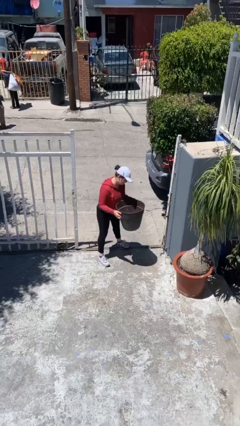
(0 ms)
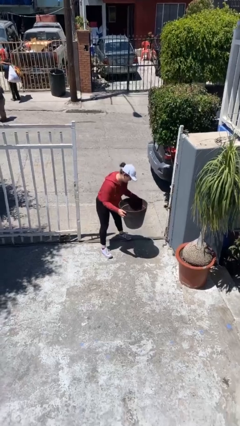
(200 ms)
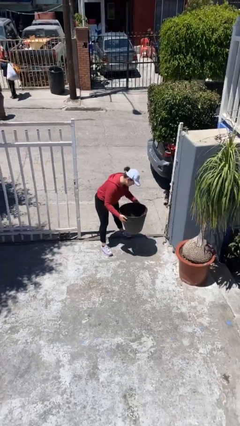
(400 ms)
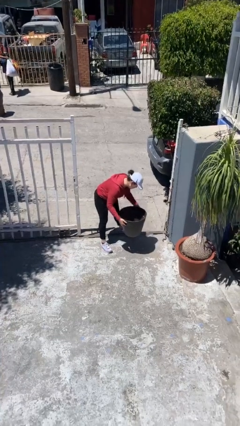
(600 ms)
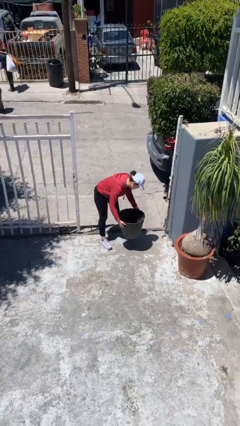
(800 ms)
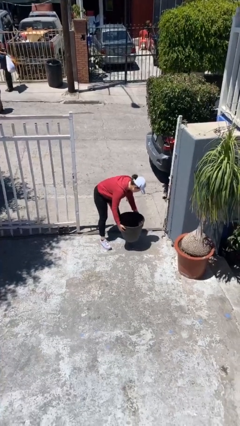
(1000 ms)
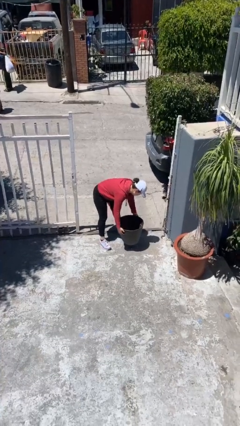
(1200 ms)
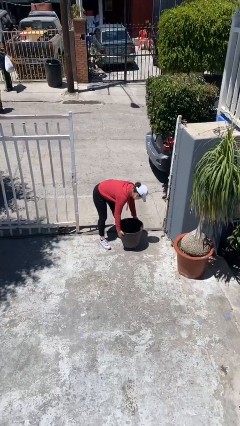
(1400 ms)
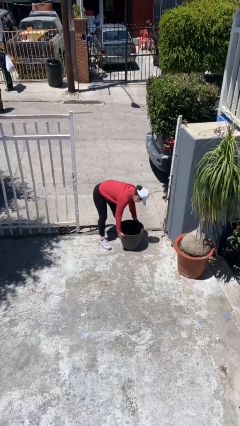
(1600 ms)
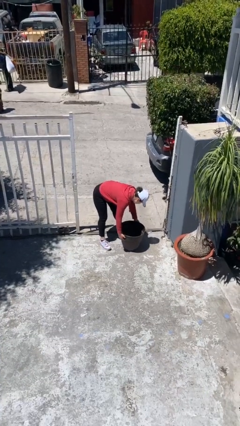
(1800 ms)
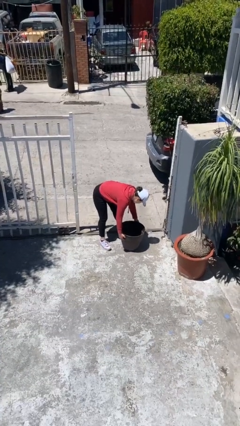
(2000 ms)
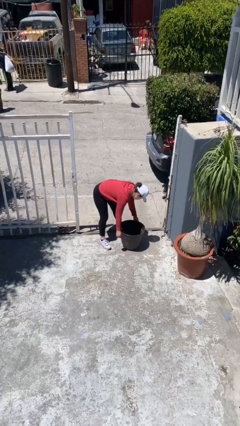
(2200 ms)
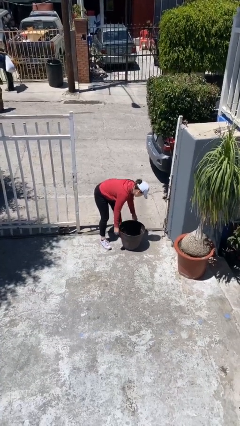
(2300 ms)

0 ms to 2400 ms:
person puts down object on floor

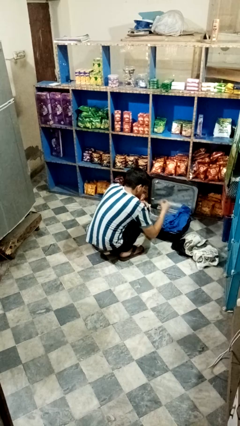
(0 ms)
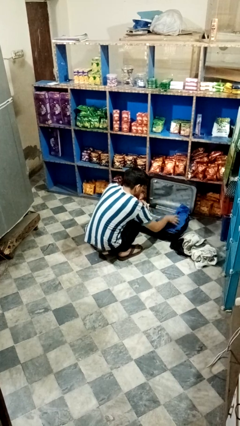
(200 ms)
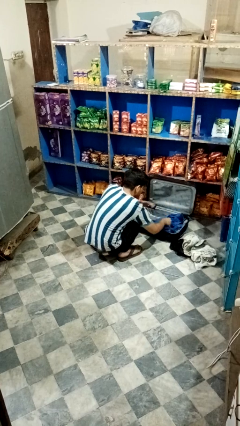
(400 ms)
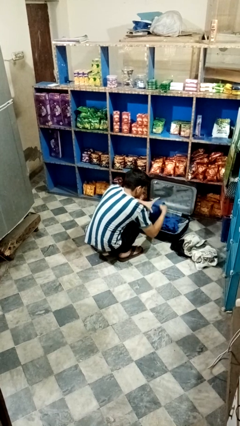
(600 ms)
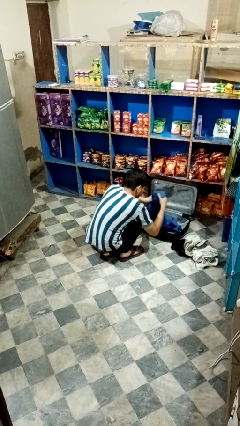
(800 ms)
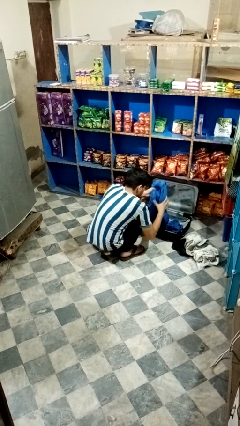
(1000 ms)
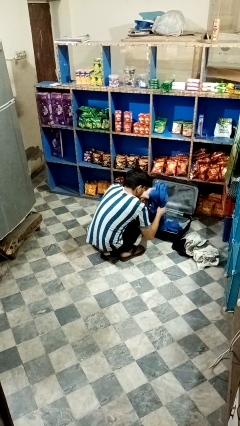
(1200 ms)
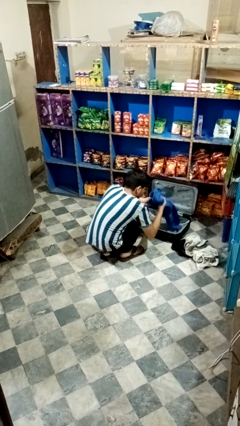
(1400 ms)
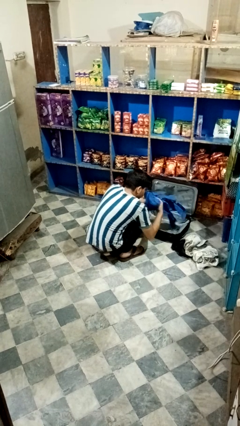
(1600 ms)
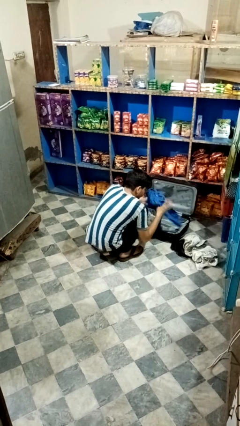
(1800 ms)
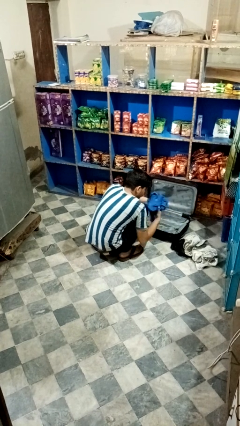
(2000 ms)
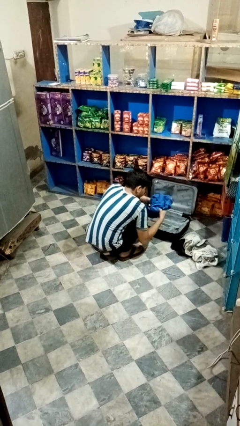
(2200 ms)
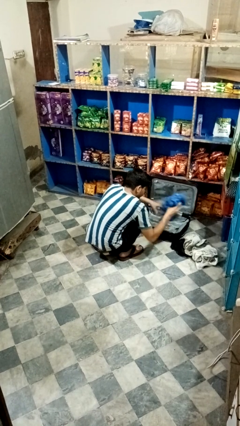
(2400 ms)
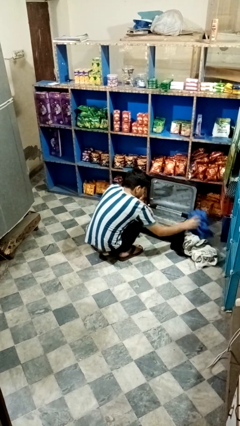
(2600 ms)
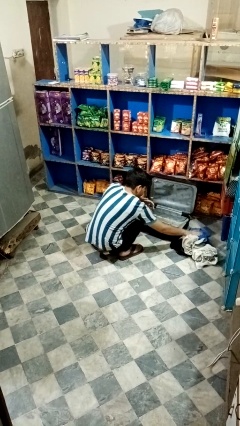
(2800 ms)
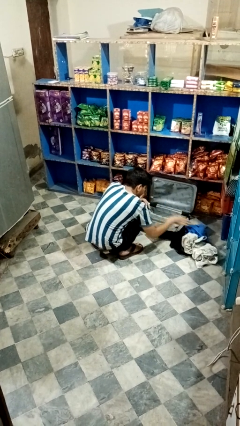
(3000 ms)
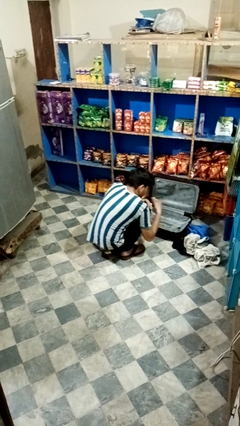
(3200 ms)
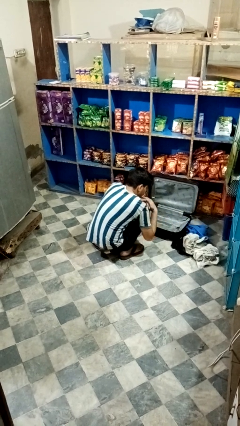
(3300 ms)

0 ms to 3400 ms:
person unloads clothes from suitcase

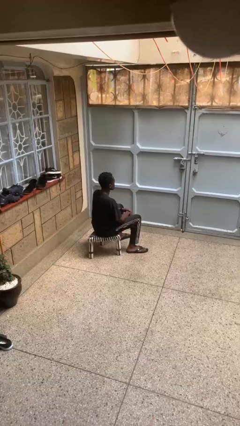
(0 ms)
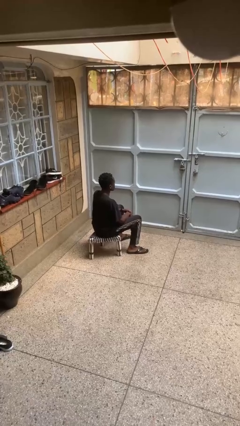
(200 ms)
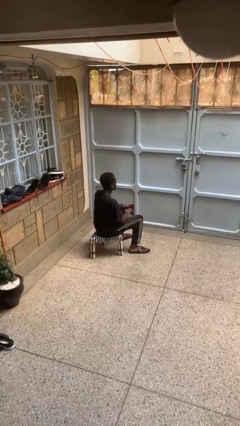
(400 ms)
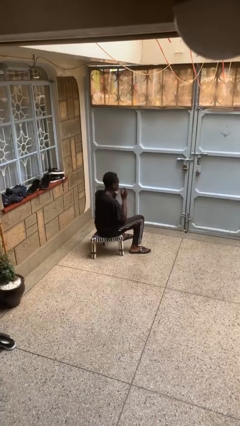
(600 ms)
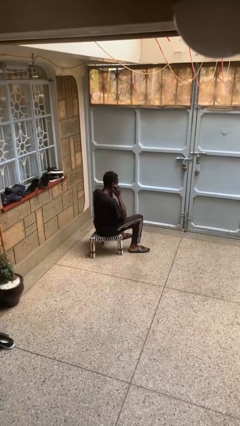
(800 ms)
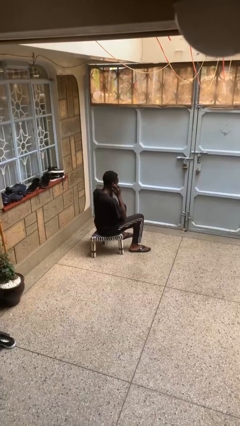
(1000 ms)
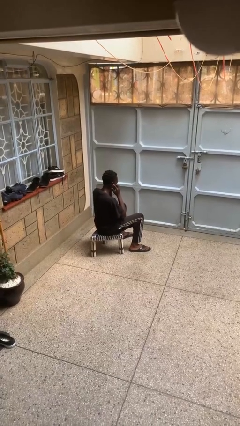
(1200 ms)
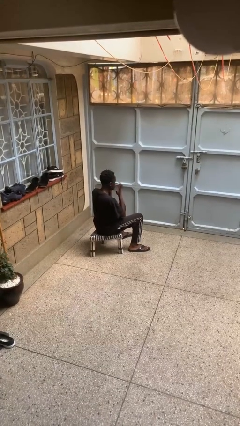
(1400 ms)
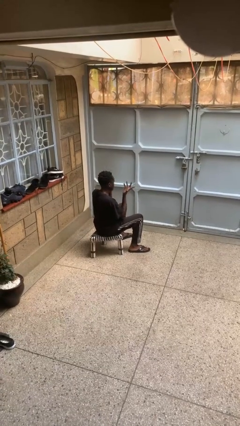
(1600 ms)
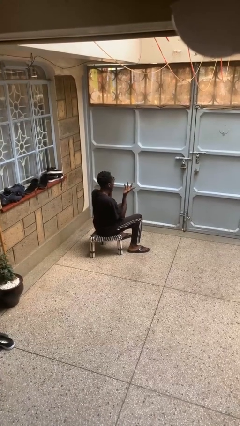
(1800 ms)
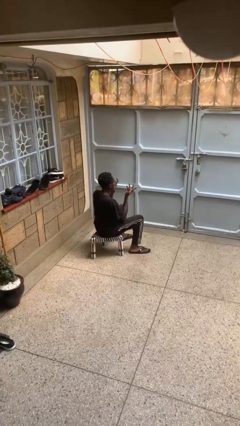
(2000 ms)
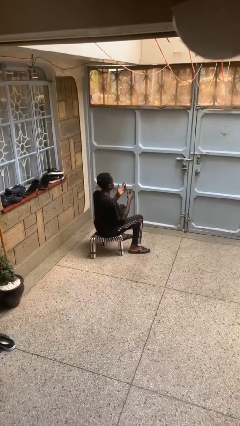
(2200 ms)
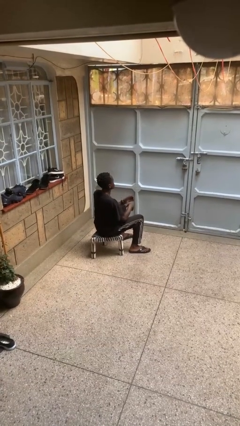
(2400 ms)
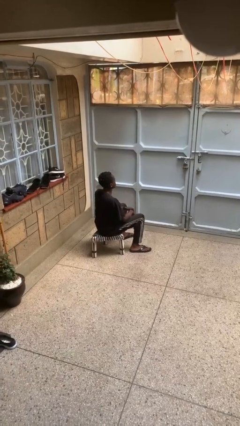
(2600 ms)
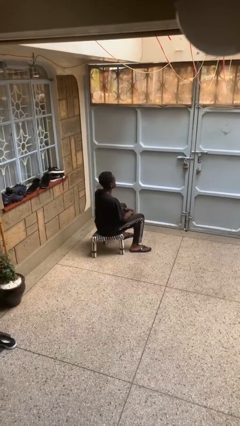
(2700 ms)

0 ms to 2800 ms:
person puts fingers in ear

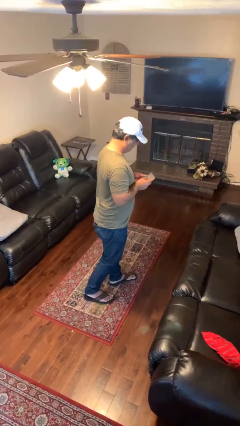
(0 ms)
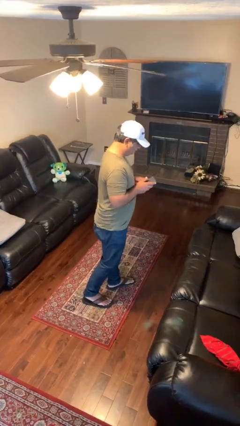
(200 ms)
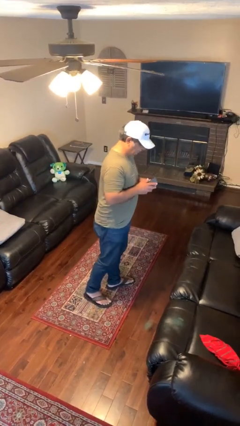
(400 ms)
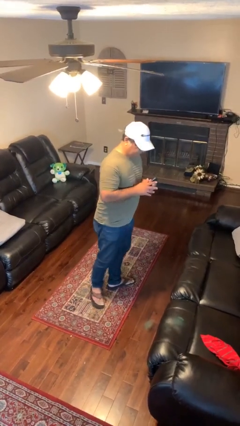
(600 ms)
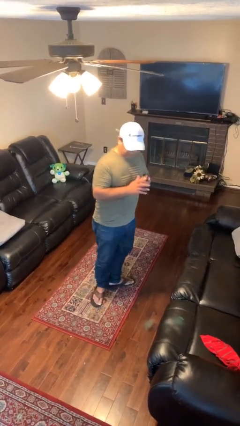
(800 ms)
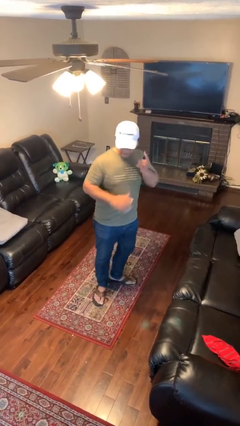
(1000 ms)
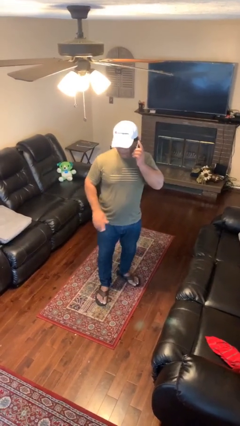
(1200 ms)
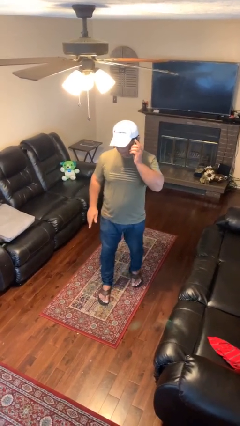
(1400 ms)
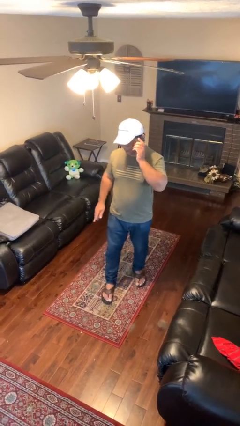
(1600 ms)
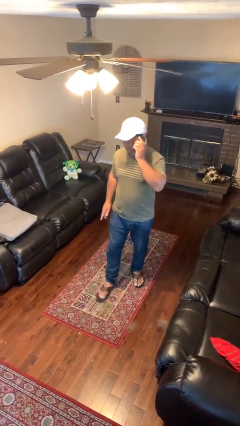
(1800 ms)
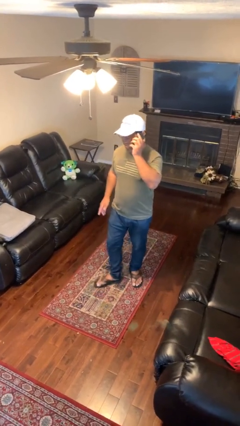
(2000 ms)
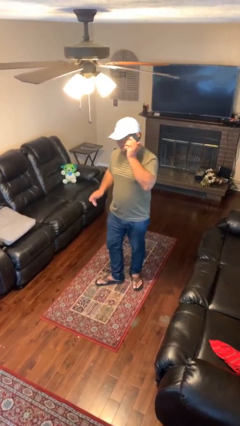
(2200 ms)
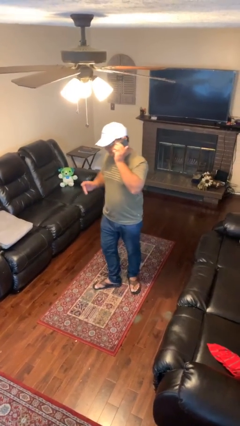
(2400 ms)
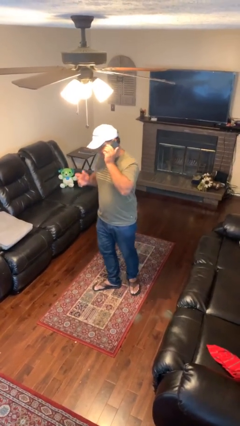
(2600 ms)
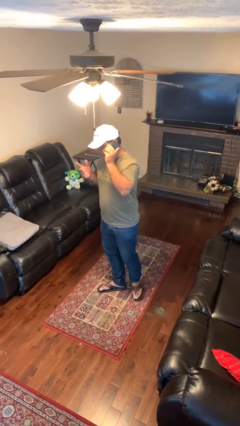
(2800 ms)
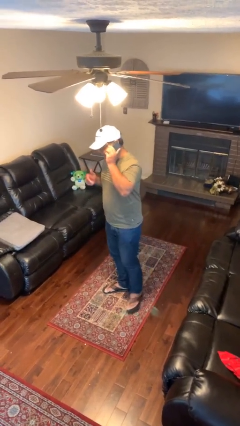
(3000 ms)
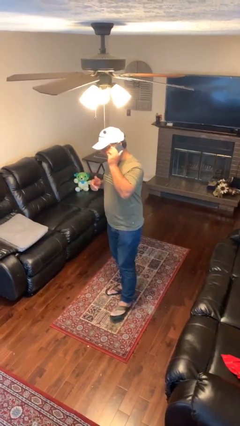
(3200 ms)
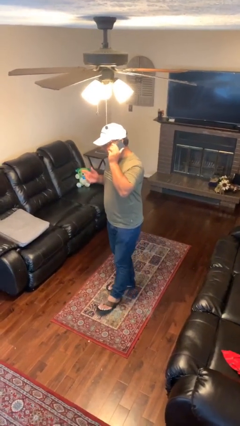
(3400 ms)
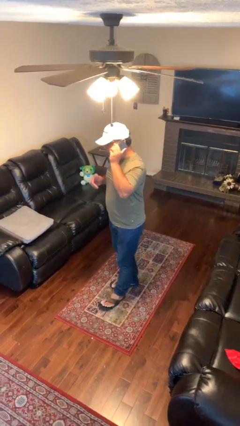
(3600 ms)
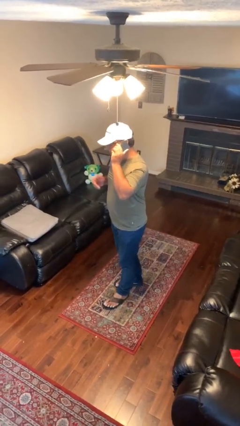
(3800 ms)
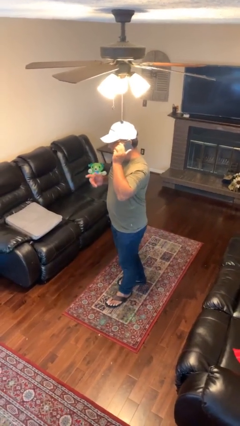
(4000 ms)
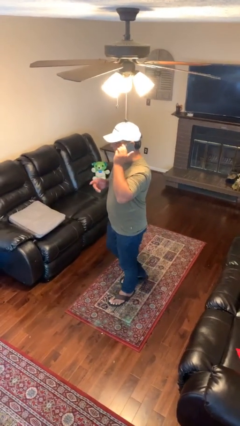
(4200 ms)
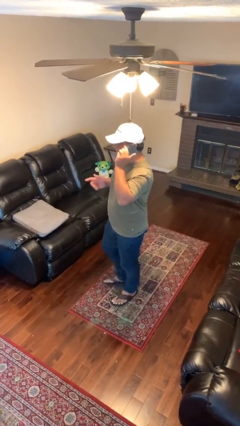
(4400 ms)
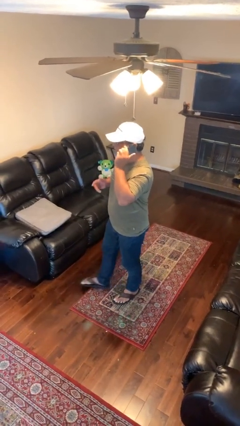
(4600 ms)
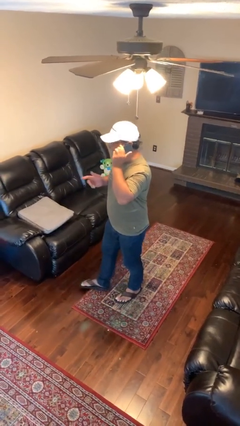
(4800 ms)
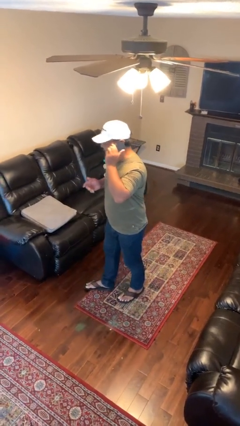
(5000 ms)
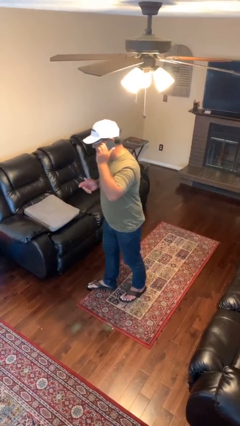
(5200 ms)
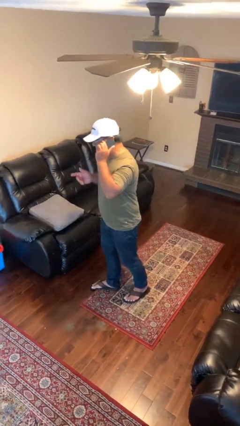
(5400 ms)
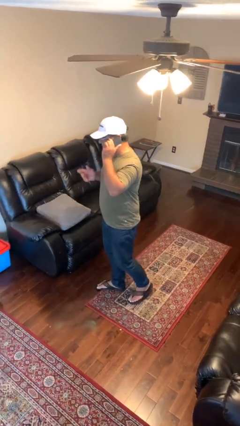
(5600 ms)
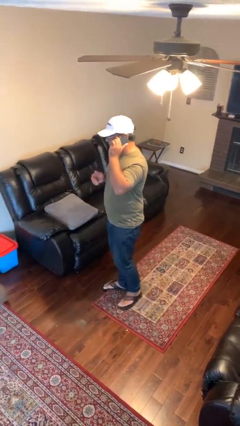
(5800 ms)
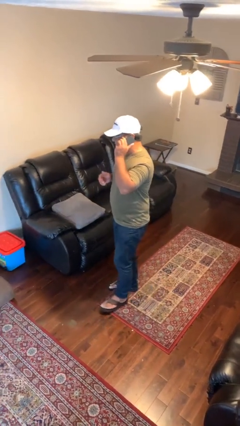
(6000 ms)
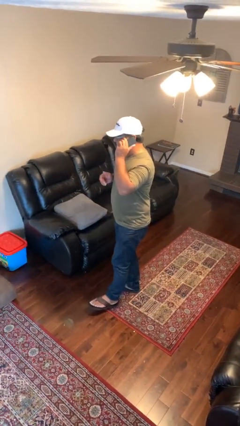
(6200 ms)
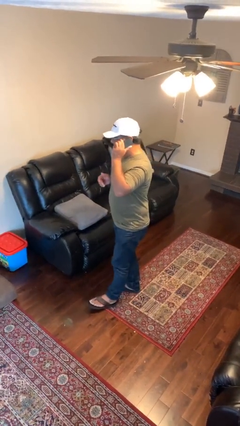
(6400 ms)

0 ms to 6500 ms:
person talks on phone

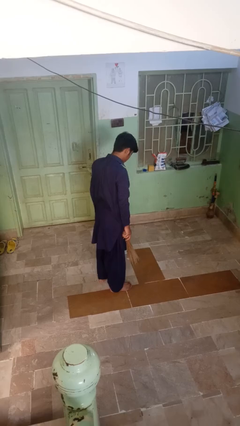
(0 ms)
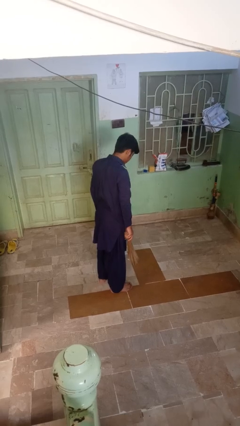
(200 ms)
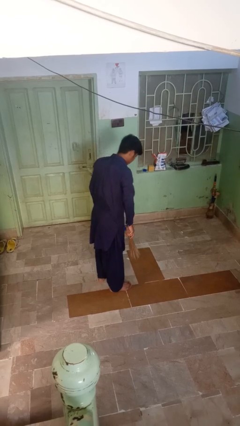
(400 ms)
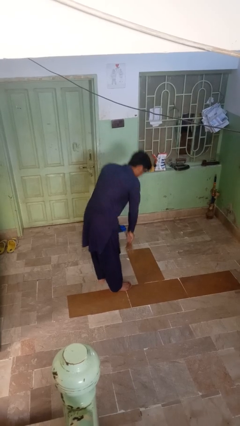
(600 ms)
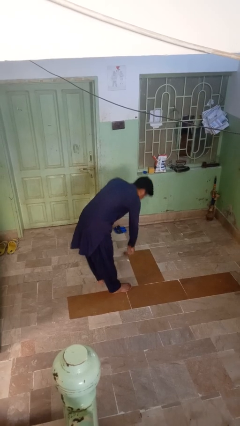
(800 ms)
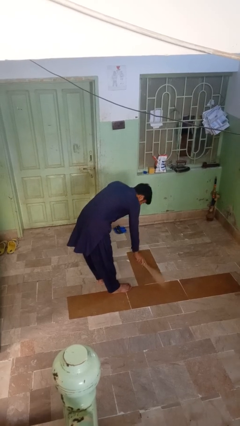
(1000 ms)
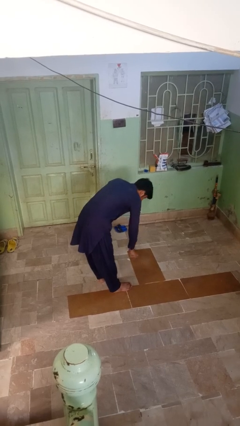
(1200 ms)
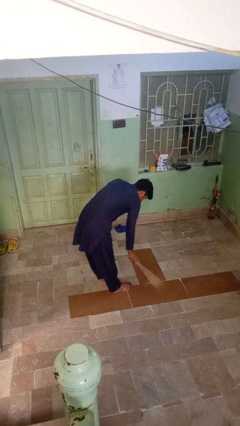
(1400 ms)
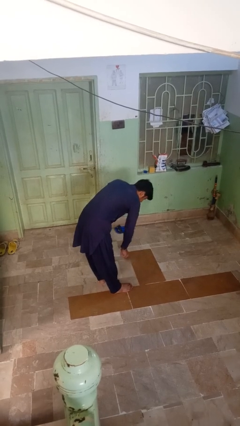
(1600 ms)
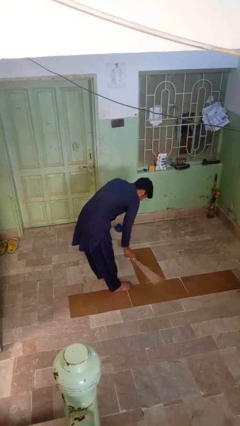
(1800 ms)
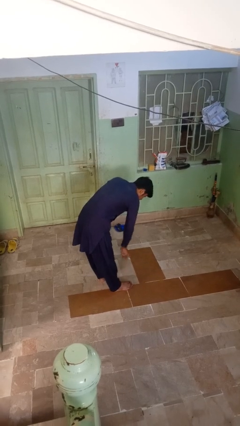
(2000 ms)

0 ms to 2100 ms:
person sweeps floor

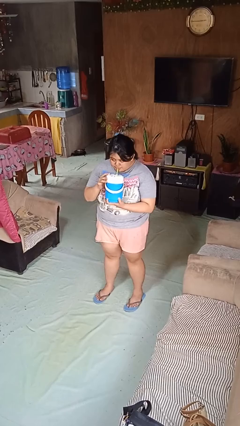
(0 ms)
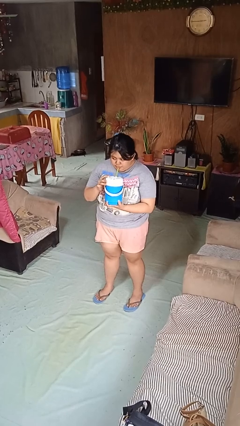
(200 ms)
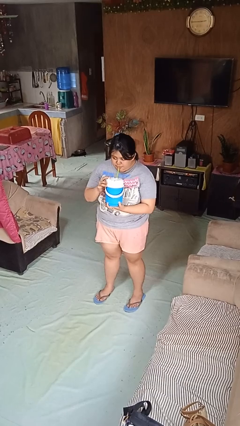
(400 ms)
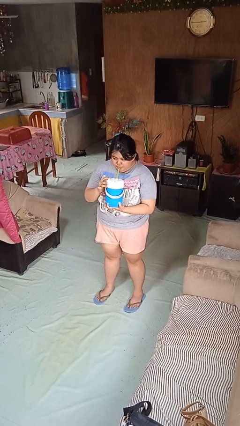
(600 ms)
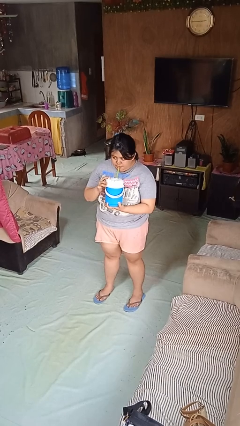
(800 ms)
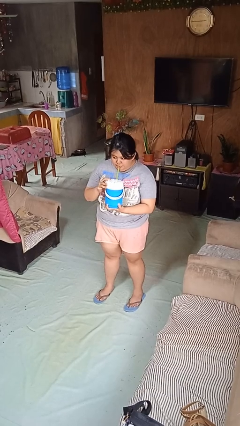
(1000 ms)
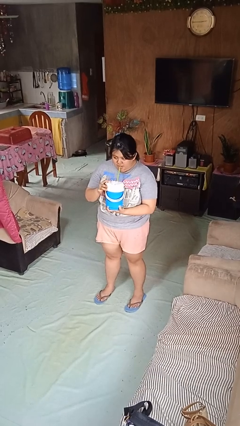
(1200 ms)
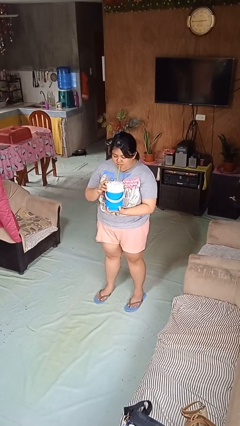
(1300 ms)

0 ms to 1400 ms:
person drinks from straw
